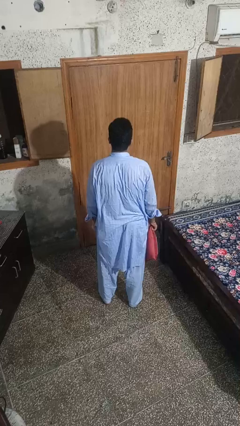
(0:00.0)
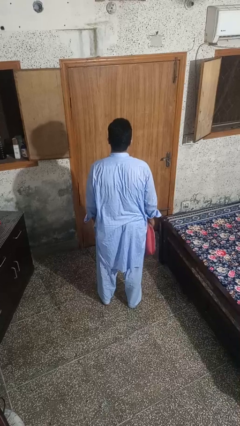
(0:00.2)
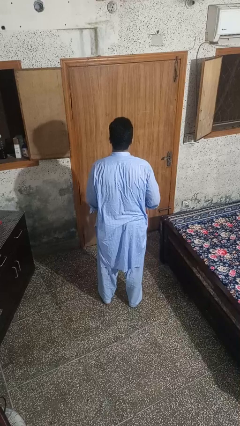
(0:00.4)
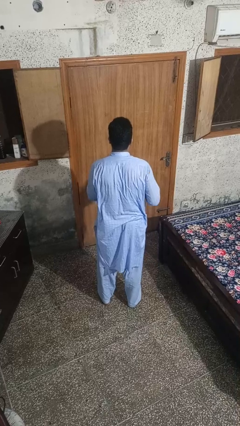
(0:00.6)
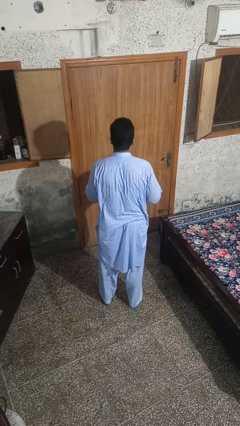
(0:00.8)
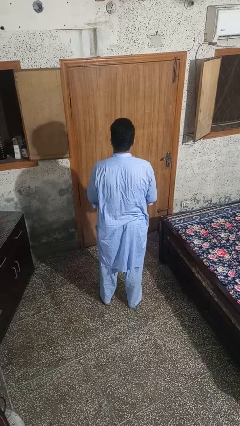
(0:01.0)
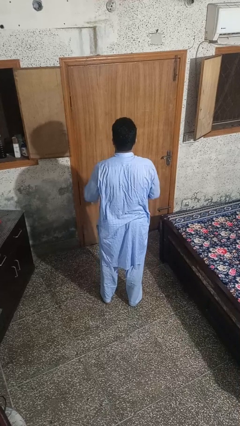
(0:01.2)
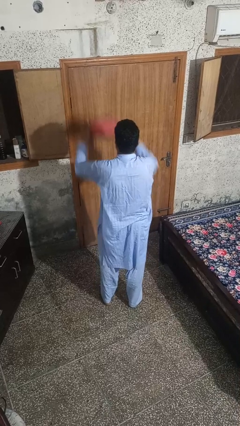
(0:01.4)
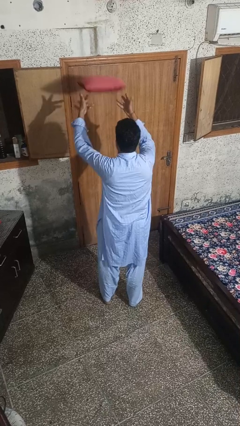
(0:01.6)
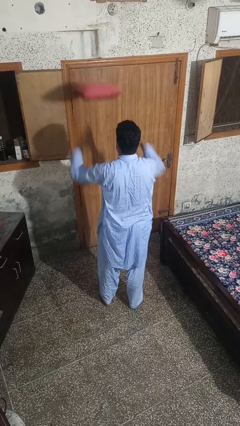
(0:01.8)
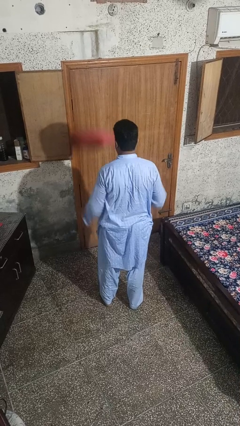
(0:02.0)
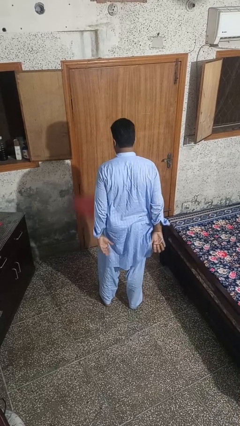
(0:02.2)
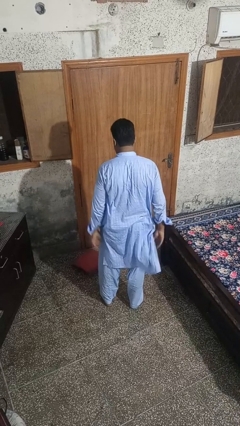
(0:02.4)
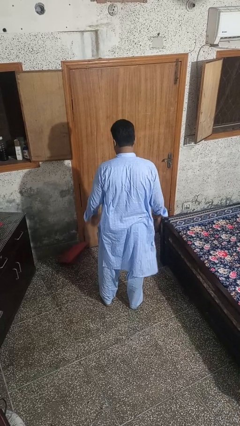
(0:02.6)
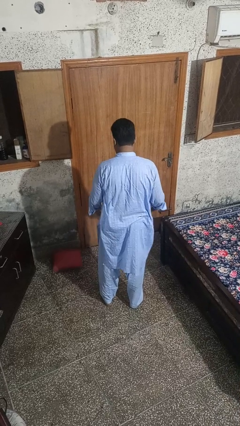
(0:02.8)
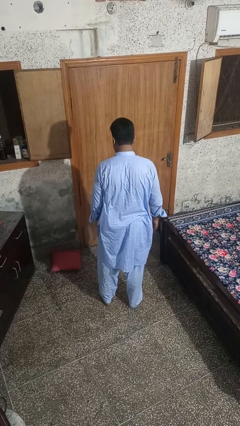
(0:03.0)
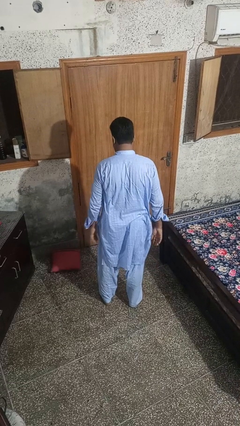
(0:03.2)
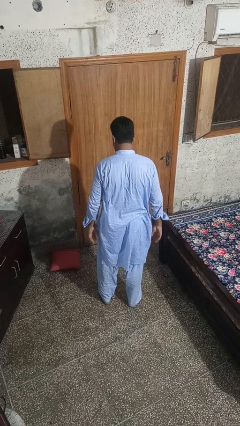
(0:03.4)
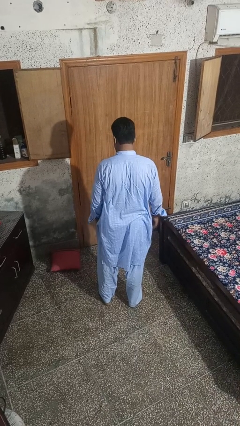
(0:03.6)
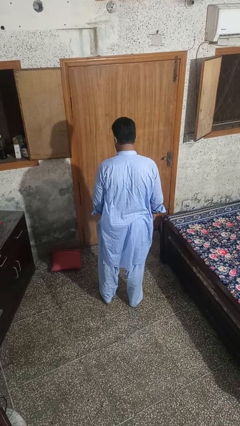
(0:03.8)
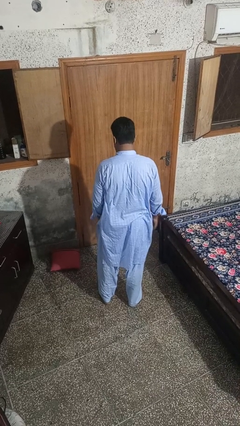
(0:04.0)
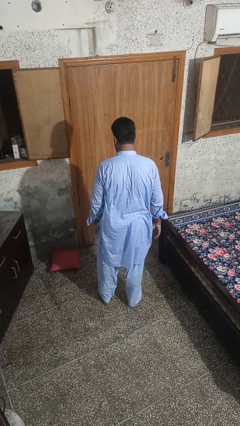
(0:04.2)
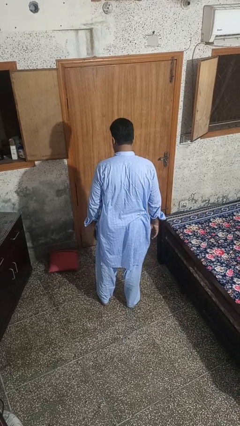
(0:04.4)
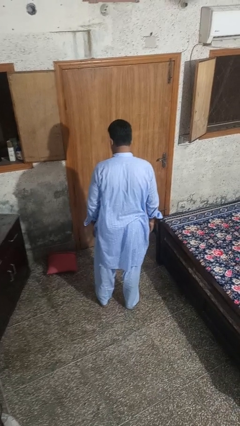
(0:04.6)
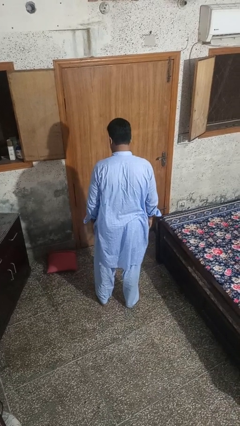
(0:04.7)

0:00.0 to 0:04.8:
person throws object into air

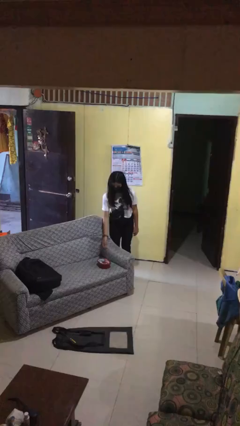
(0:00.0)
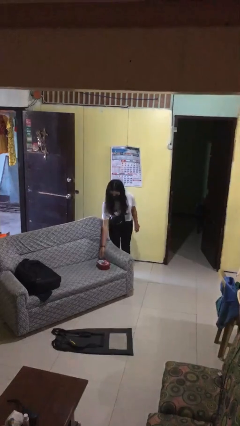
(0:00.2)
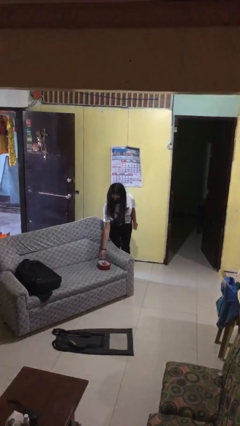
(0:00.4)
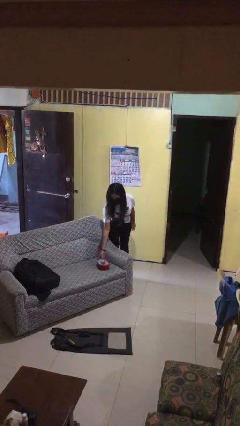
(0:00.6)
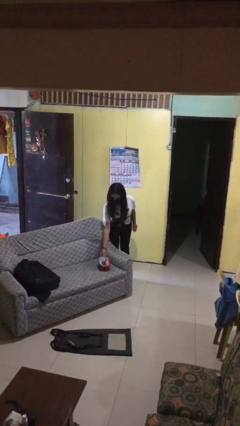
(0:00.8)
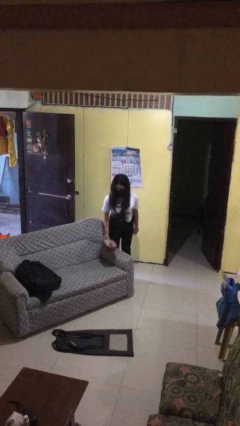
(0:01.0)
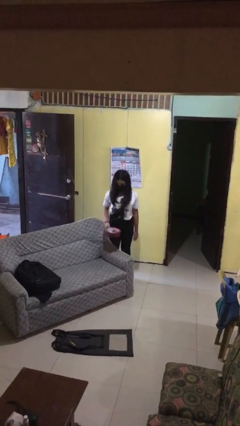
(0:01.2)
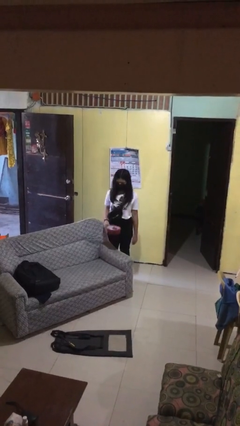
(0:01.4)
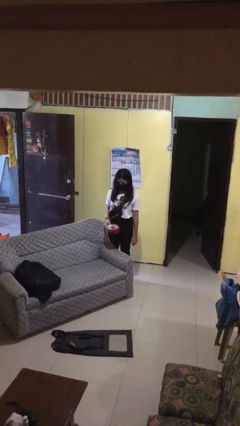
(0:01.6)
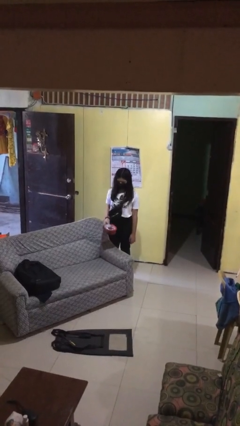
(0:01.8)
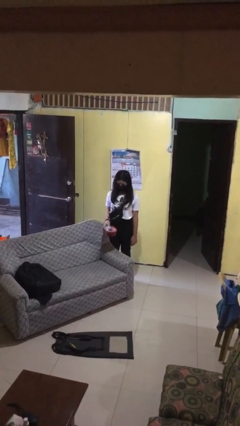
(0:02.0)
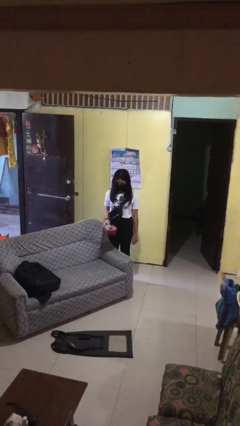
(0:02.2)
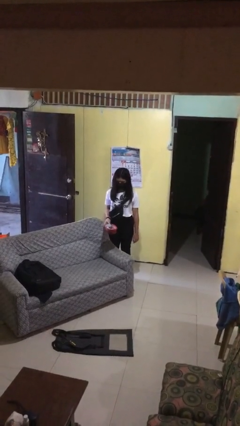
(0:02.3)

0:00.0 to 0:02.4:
person picks up object from couch

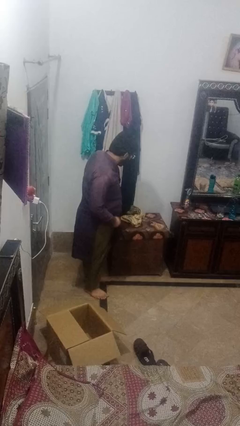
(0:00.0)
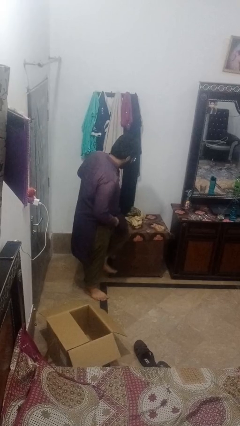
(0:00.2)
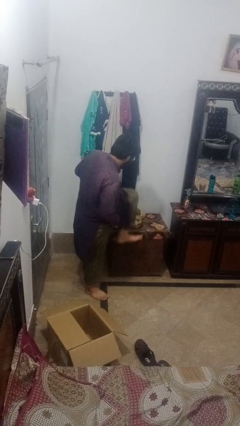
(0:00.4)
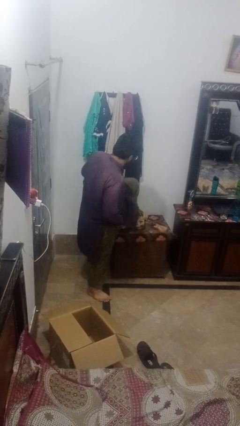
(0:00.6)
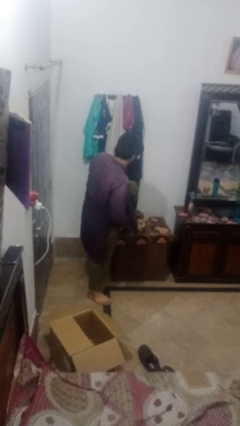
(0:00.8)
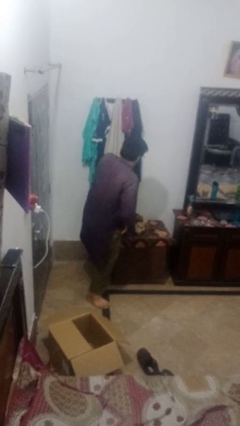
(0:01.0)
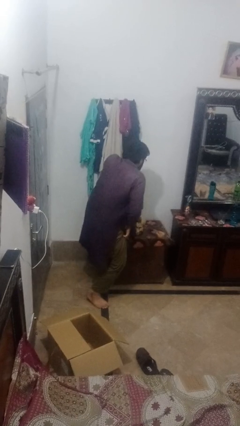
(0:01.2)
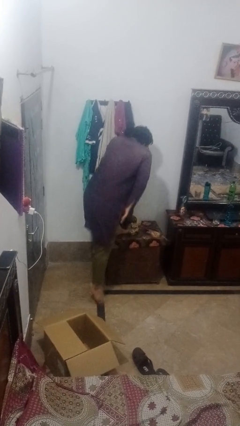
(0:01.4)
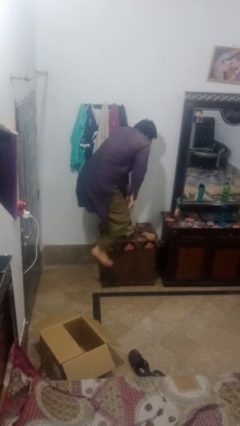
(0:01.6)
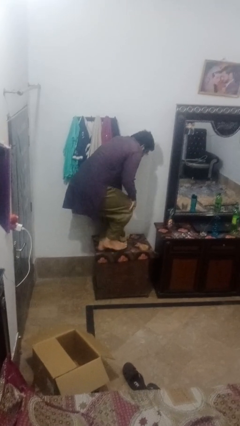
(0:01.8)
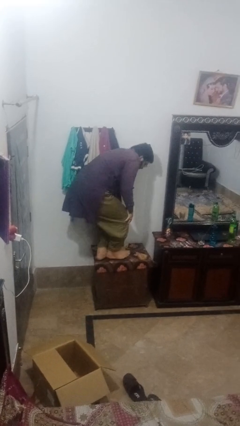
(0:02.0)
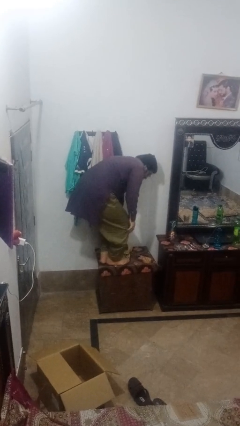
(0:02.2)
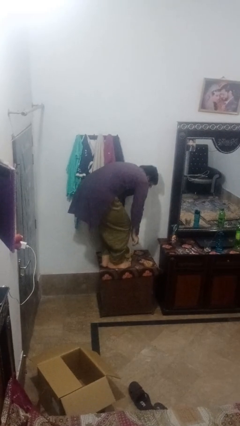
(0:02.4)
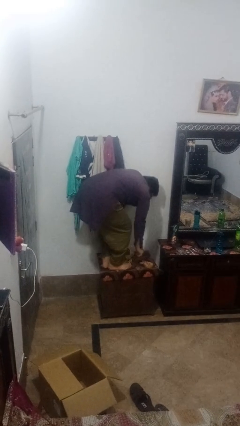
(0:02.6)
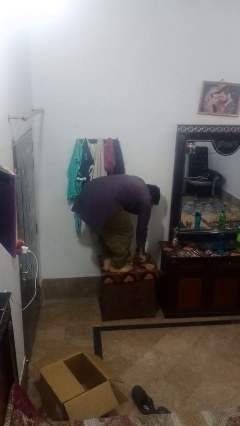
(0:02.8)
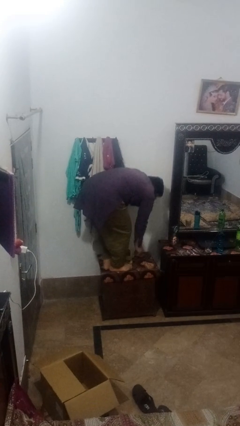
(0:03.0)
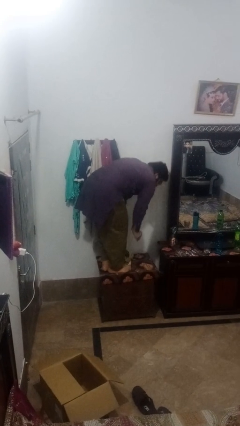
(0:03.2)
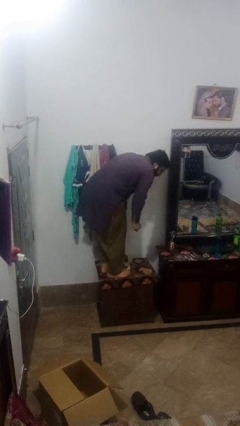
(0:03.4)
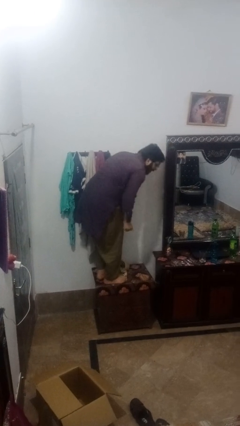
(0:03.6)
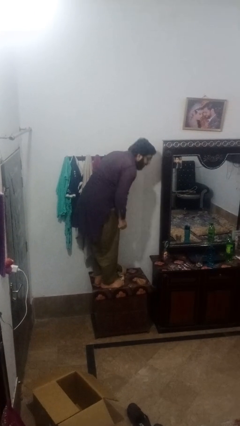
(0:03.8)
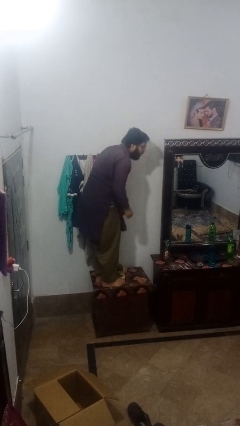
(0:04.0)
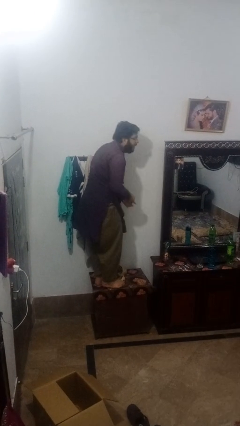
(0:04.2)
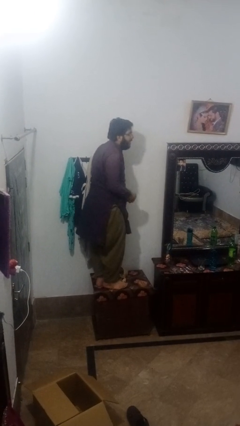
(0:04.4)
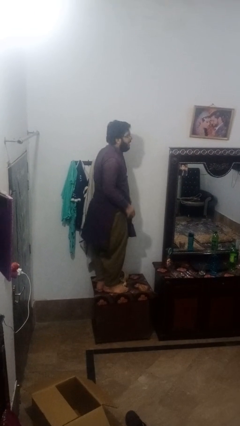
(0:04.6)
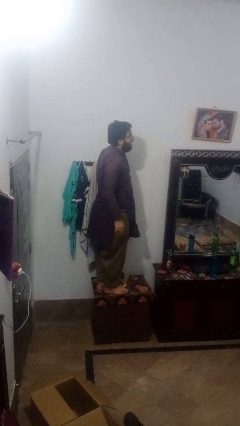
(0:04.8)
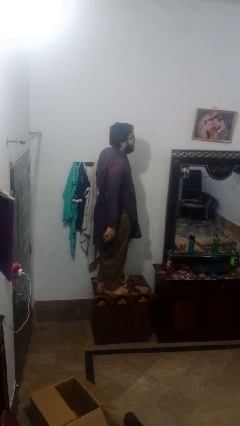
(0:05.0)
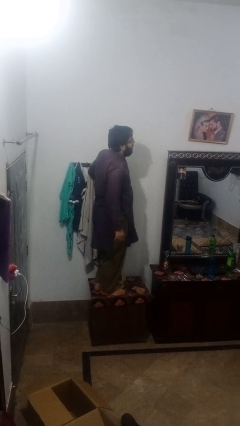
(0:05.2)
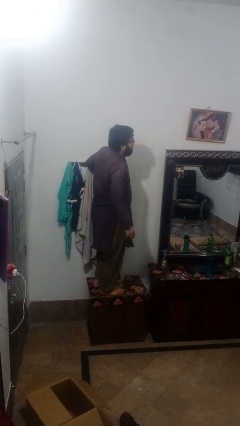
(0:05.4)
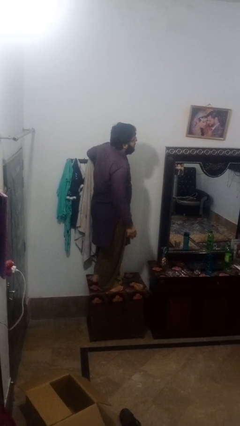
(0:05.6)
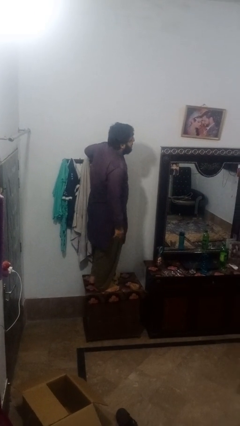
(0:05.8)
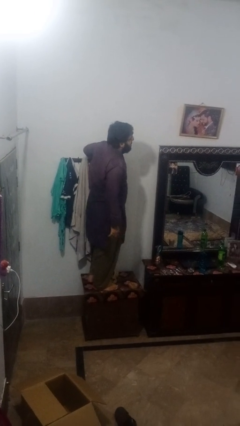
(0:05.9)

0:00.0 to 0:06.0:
person climbs on table

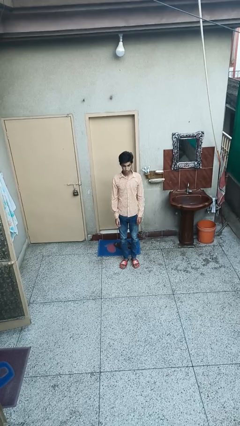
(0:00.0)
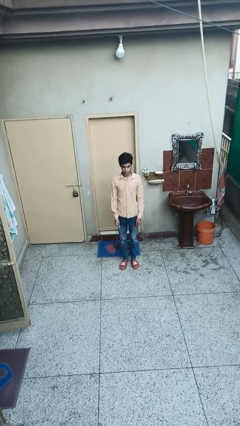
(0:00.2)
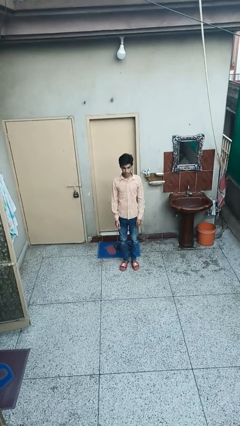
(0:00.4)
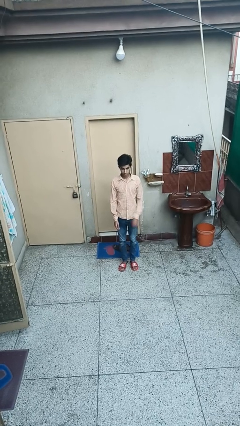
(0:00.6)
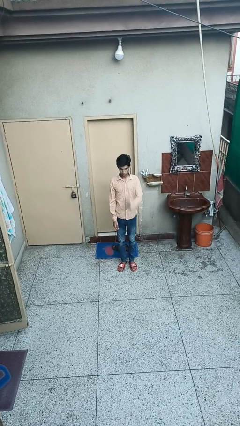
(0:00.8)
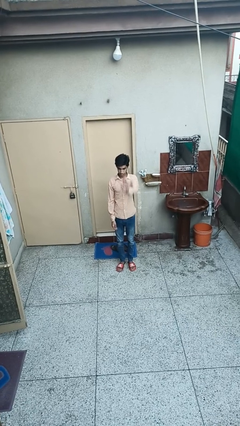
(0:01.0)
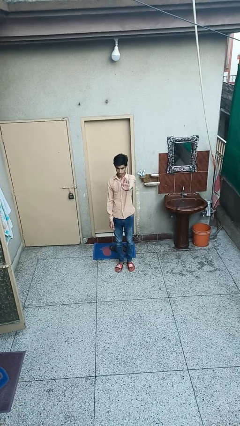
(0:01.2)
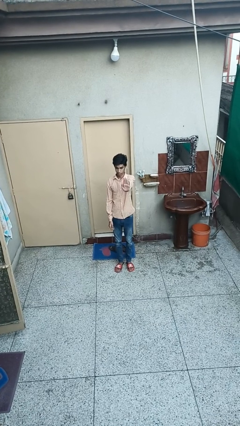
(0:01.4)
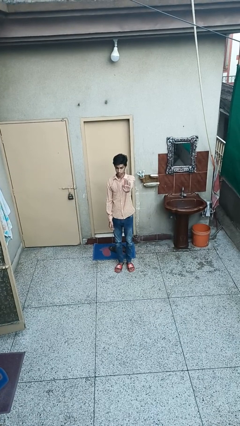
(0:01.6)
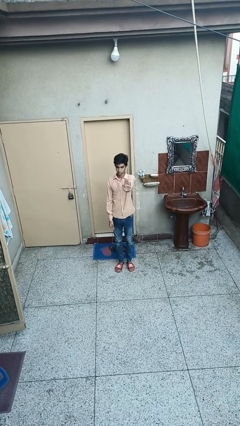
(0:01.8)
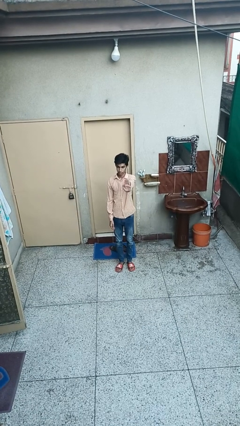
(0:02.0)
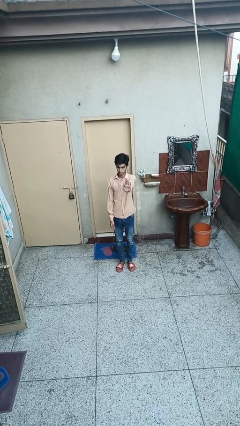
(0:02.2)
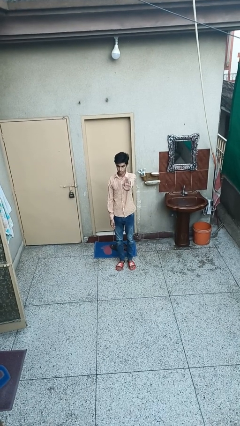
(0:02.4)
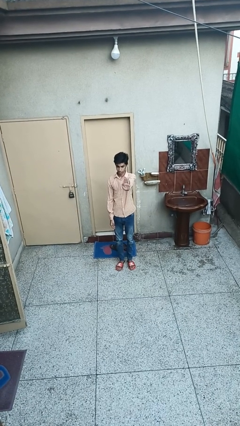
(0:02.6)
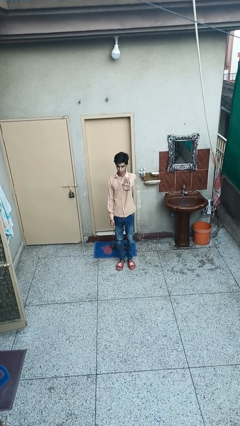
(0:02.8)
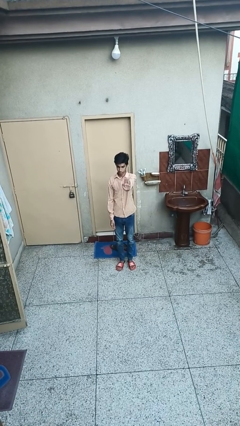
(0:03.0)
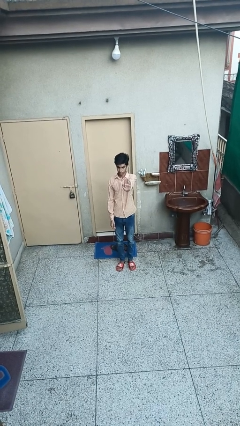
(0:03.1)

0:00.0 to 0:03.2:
person gestures stop

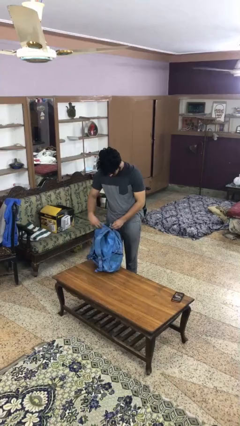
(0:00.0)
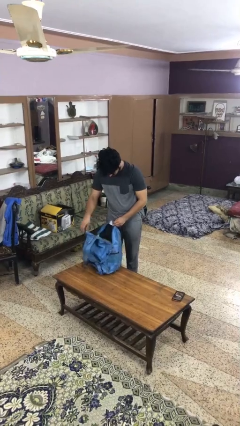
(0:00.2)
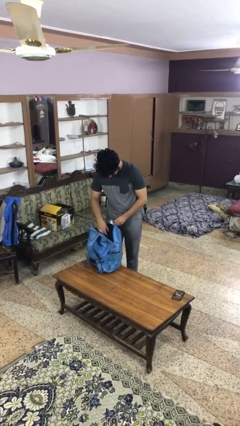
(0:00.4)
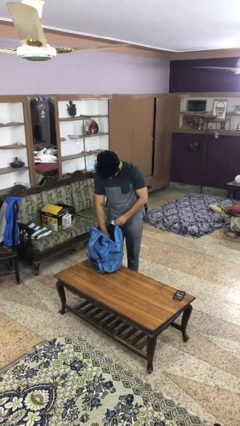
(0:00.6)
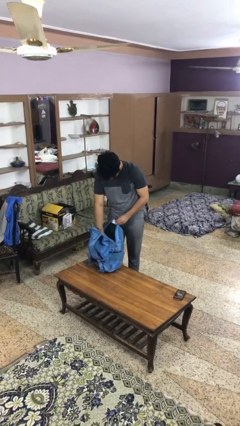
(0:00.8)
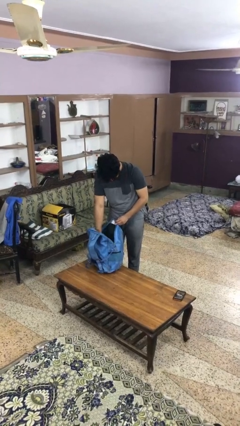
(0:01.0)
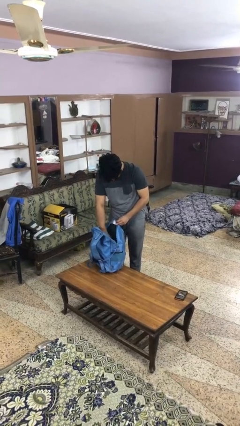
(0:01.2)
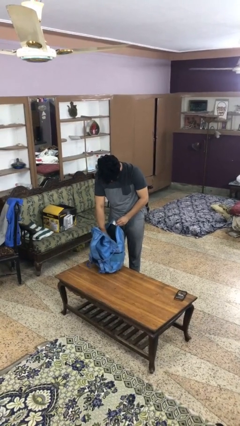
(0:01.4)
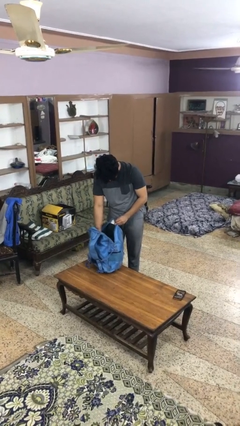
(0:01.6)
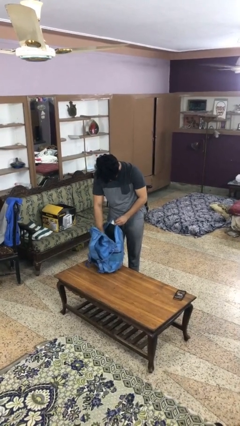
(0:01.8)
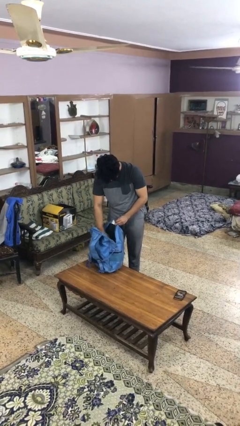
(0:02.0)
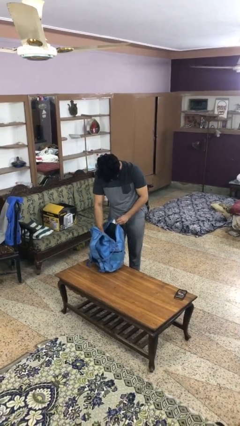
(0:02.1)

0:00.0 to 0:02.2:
person searches in bag
